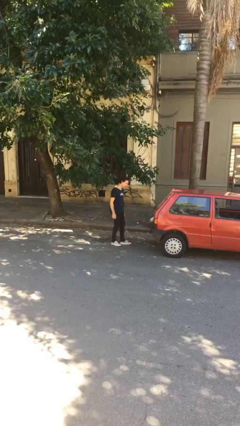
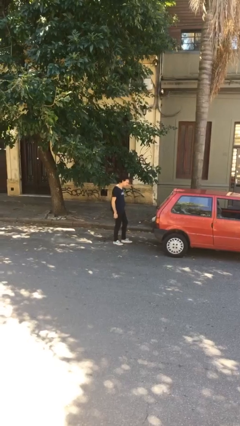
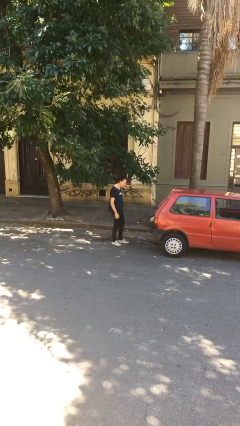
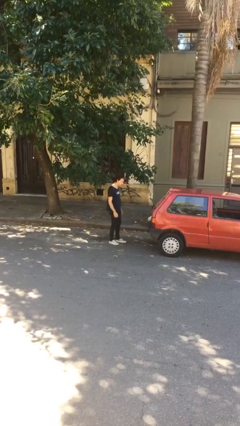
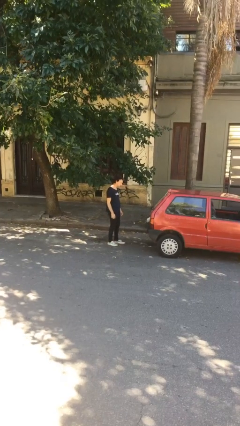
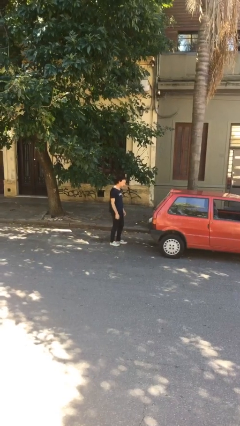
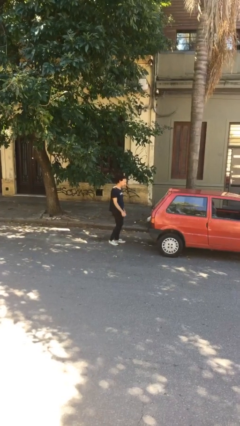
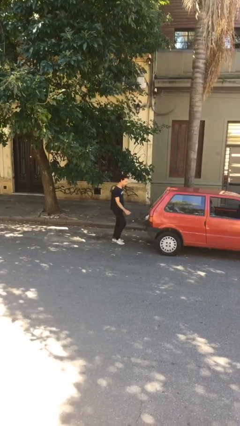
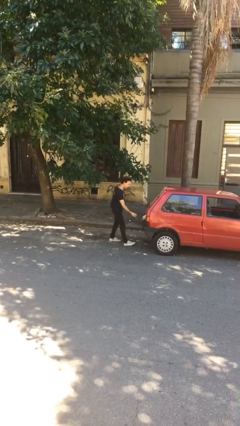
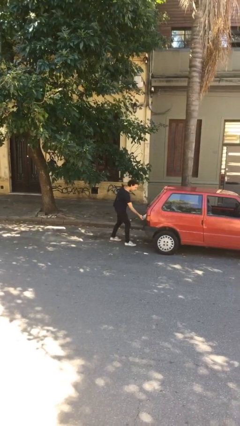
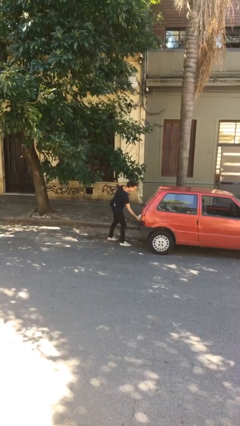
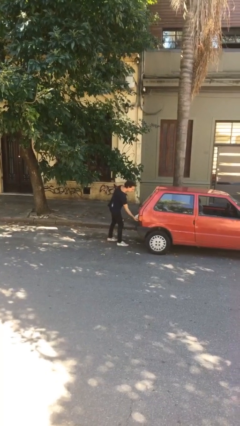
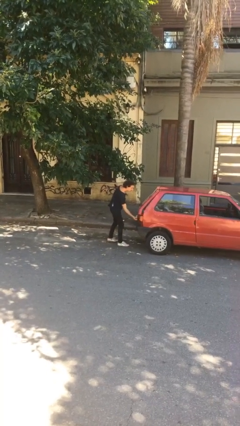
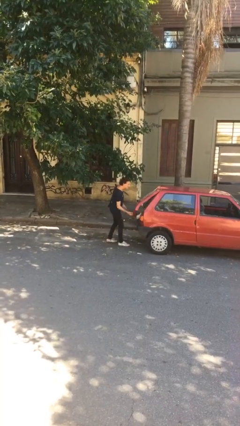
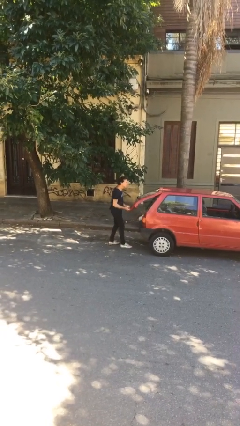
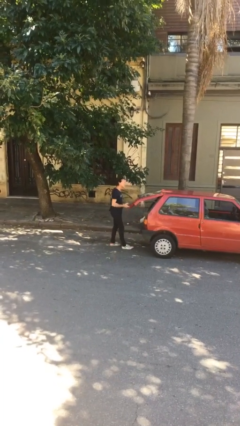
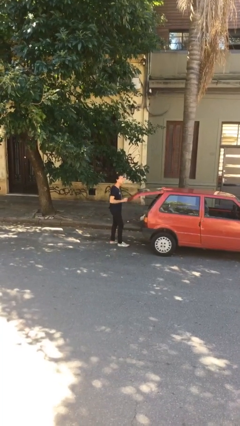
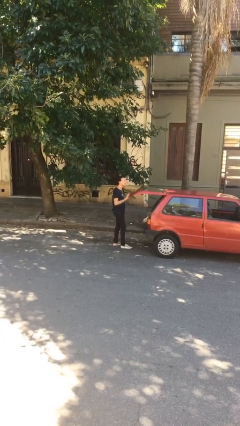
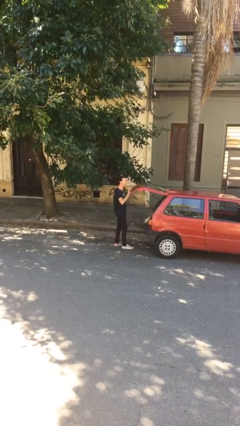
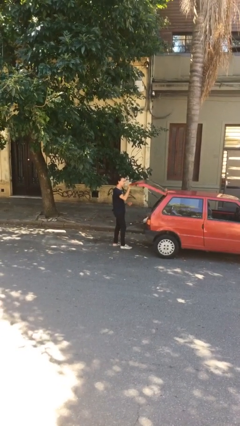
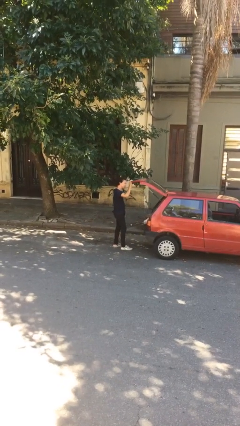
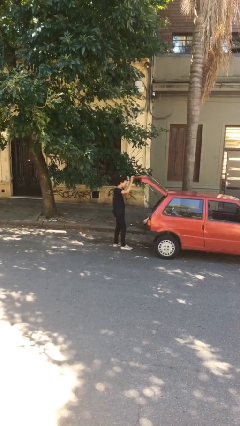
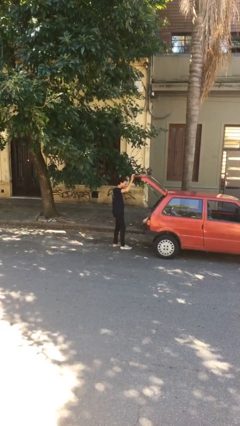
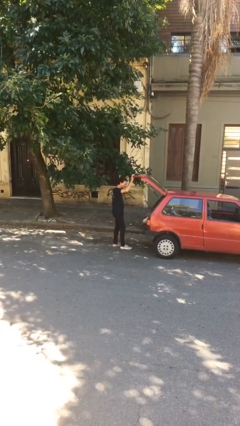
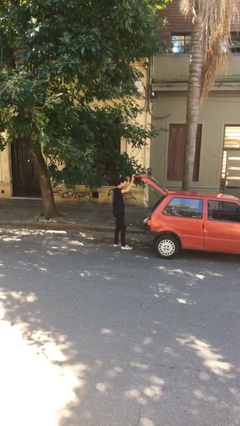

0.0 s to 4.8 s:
person opens car trunk

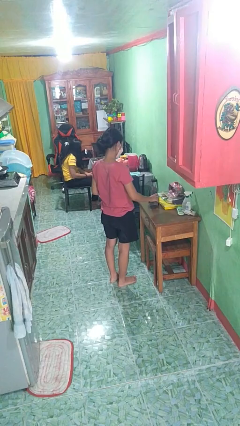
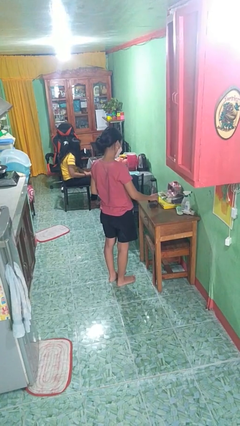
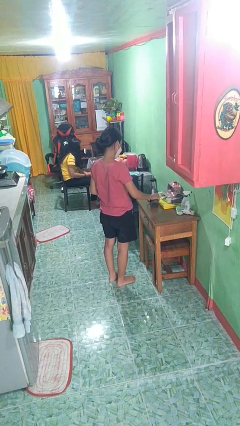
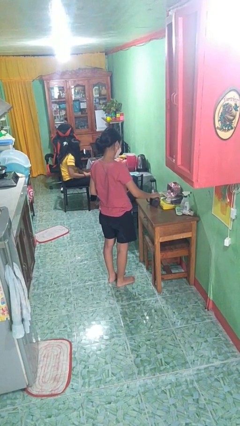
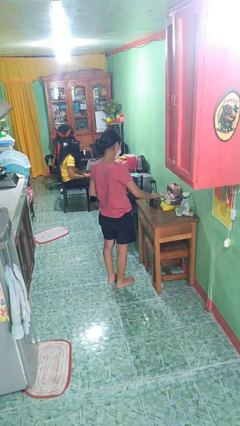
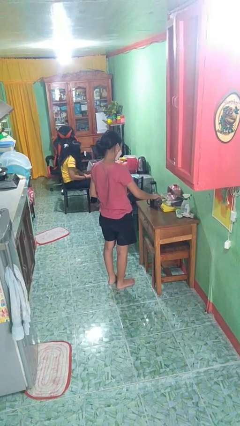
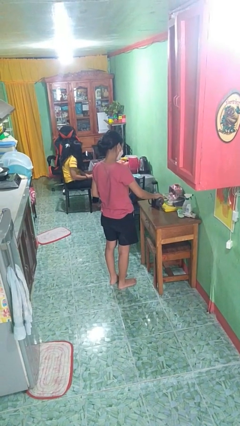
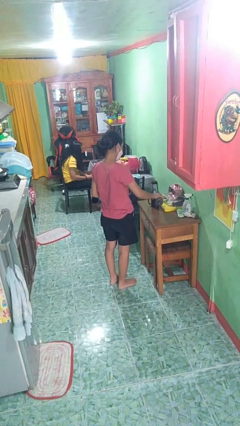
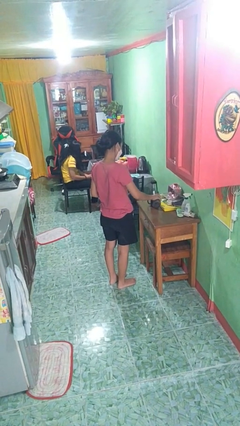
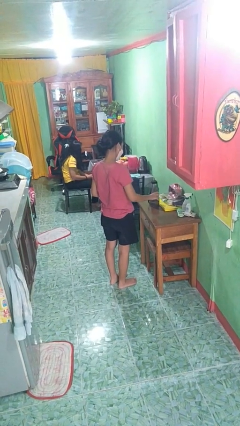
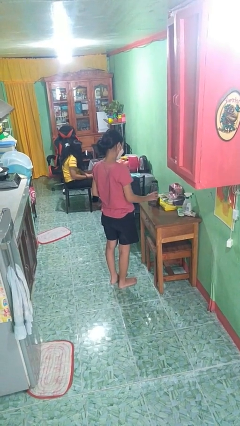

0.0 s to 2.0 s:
person pours liquid into cup

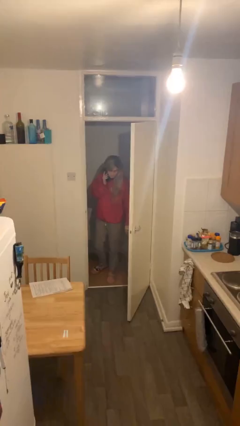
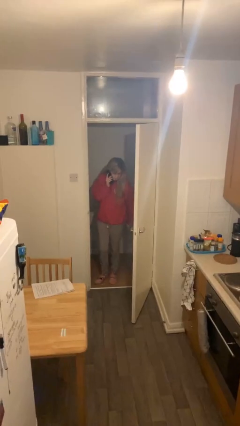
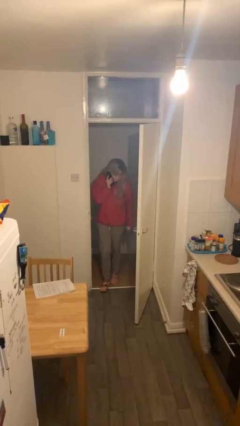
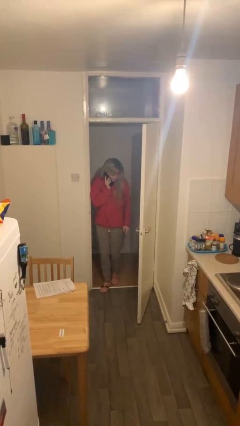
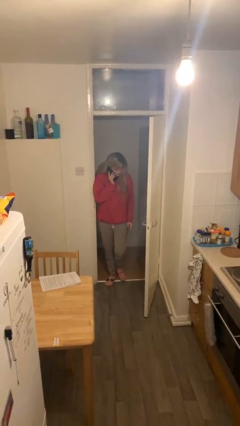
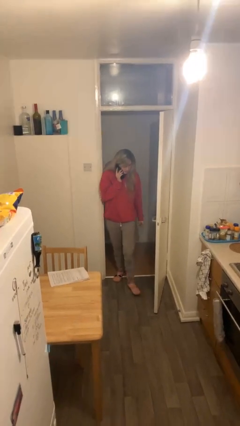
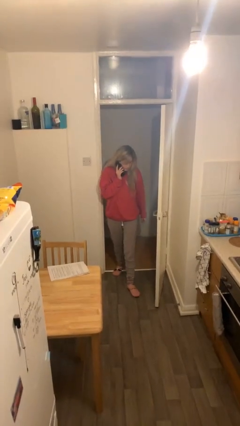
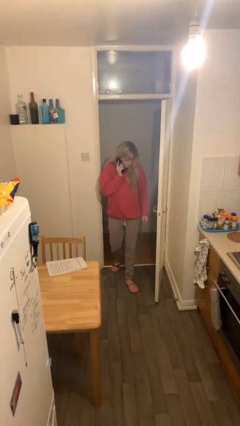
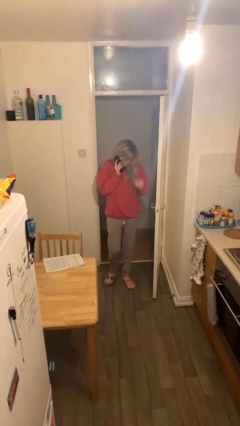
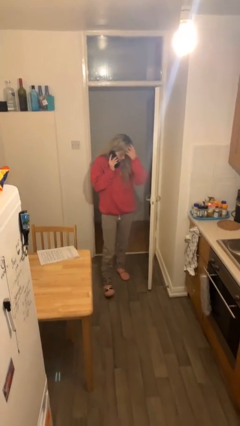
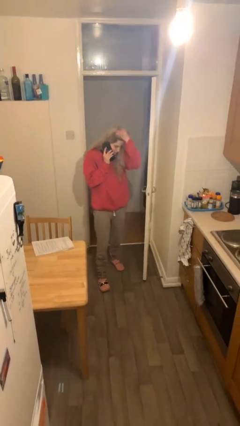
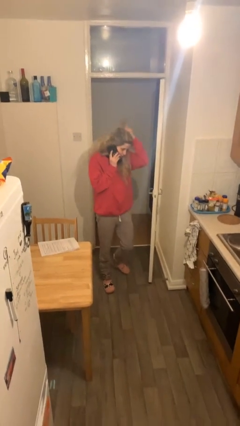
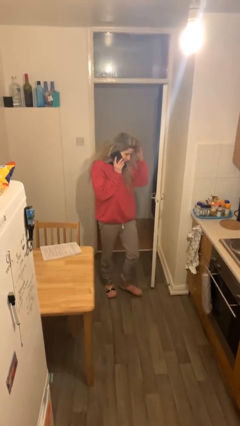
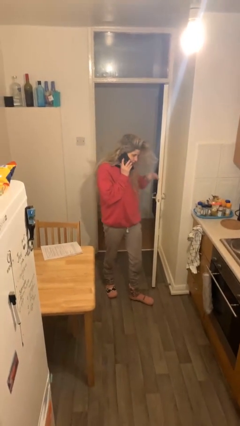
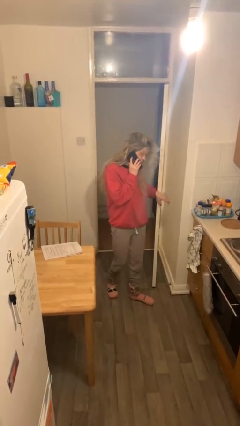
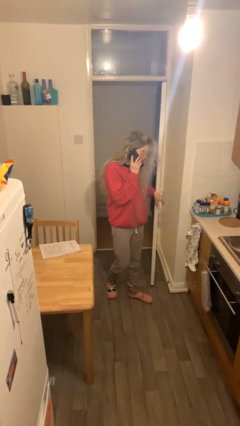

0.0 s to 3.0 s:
person enters scene through structure

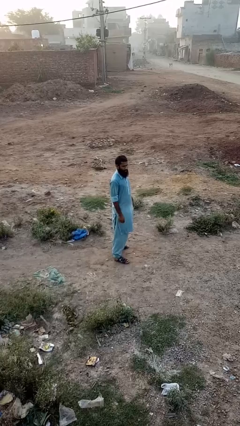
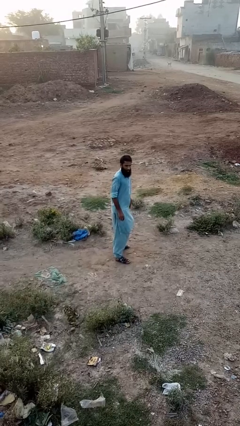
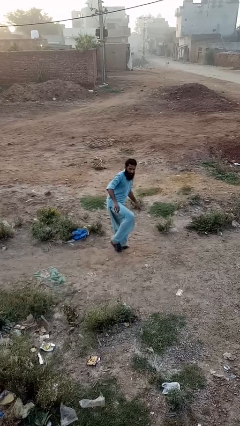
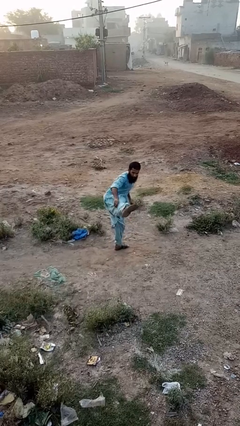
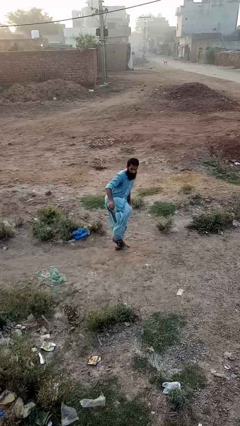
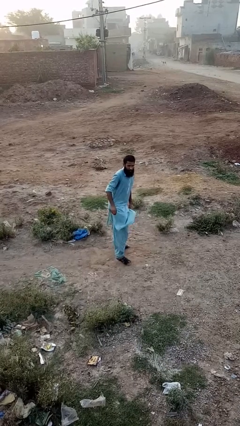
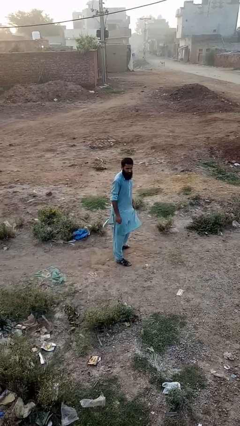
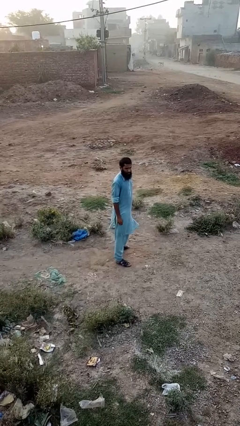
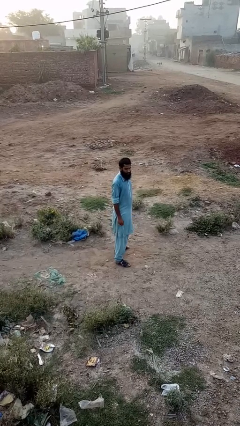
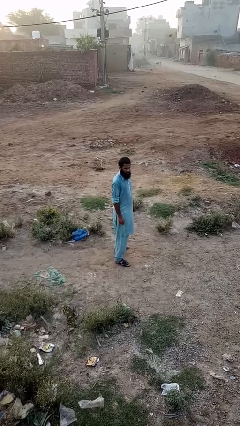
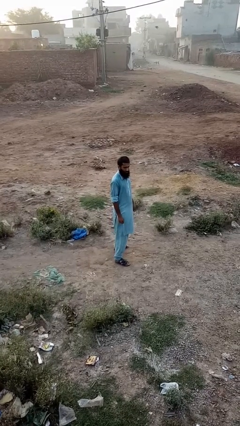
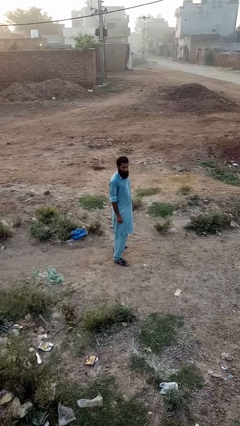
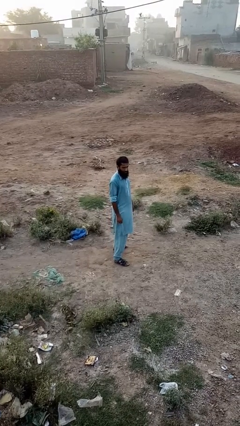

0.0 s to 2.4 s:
person karate kicks

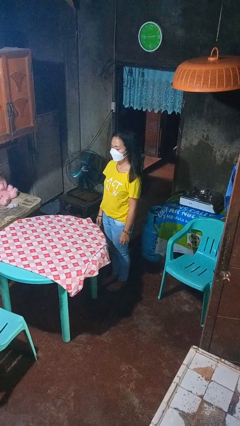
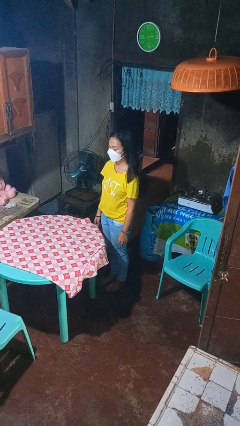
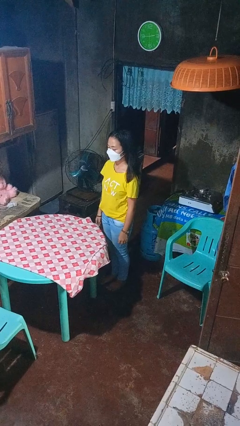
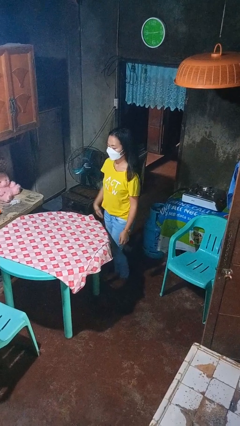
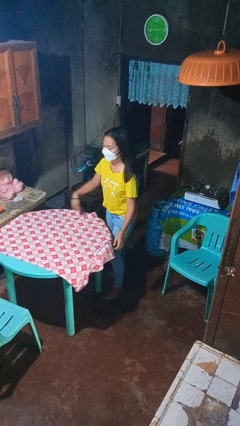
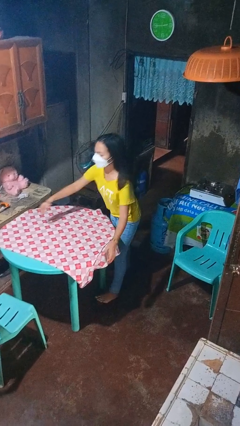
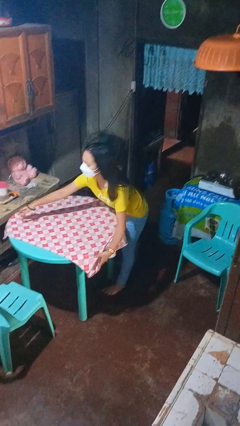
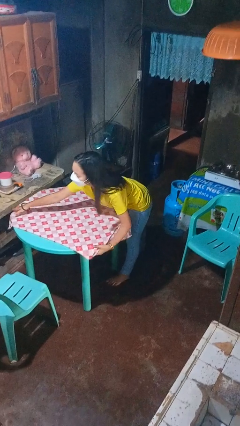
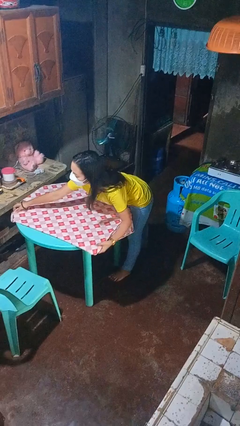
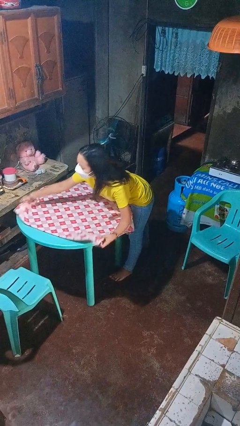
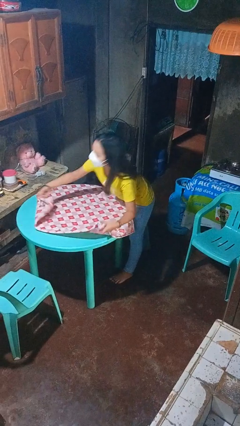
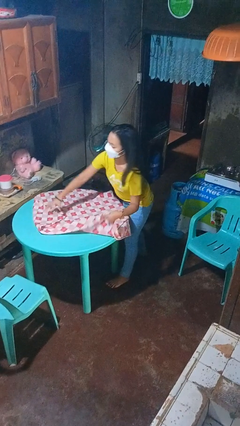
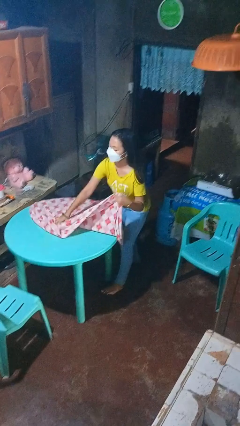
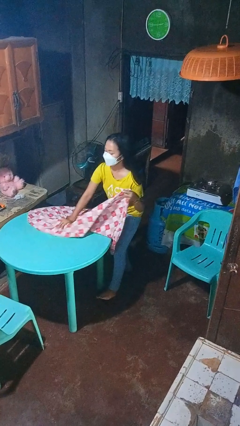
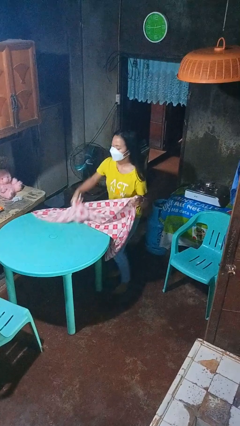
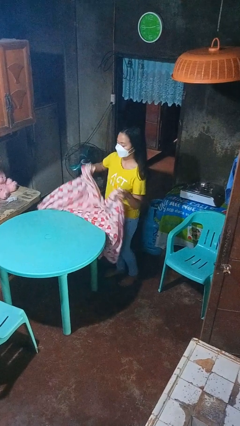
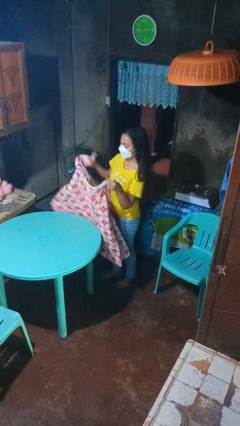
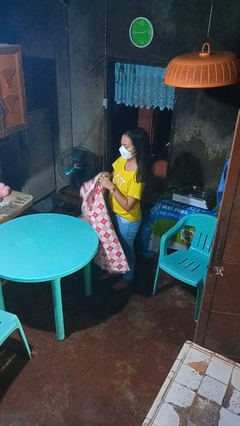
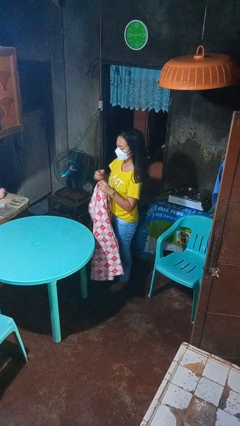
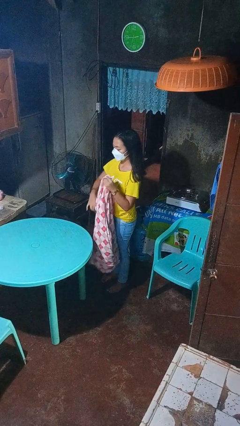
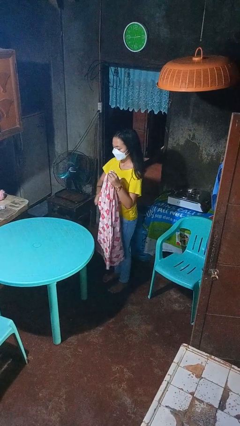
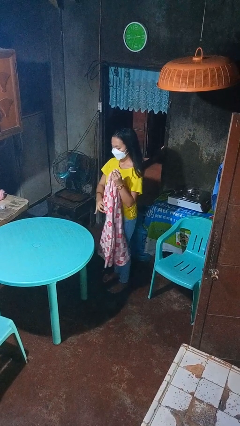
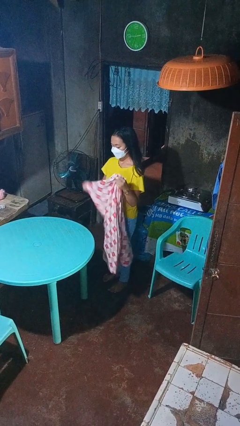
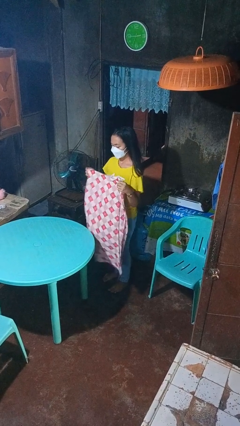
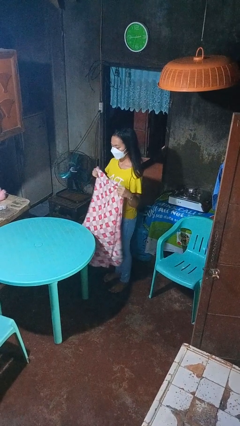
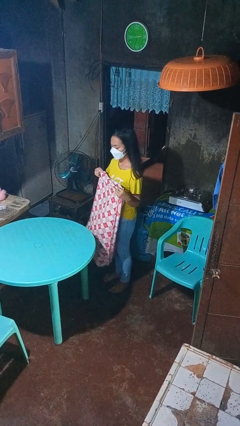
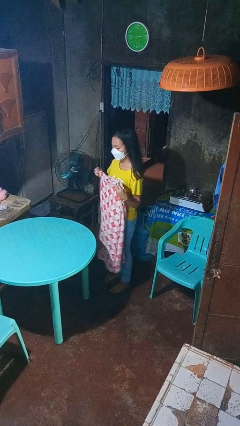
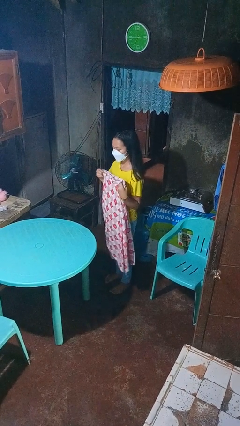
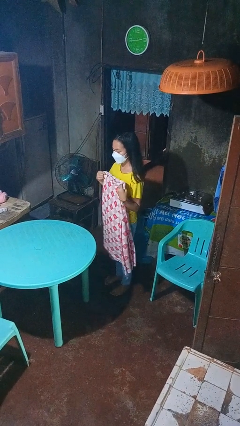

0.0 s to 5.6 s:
person folds tablecloth
